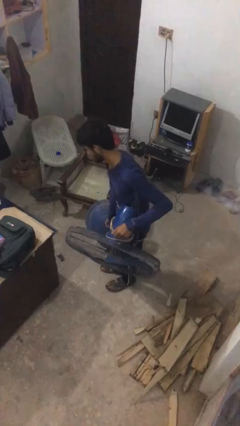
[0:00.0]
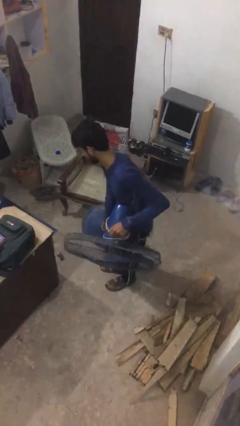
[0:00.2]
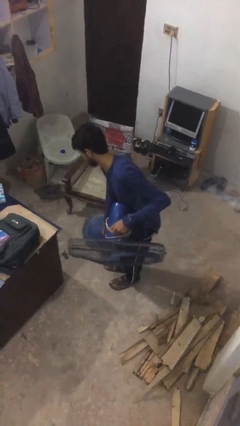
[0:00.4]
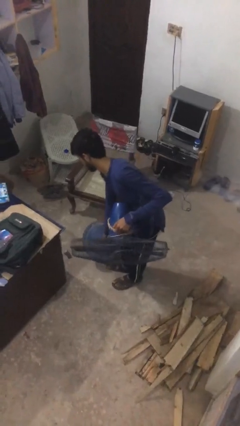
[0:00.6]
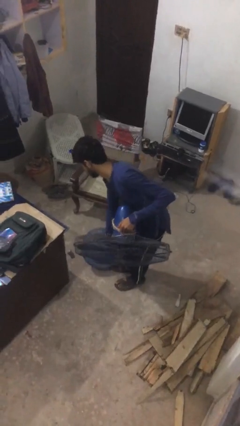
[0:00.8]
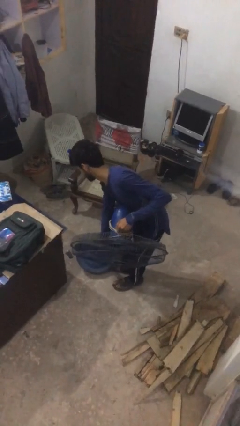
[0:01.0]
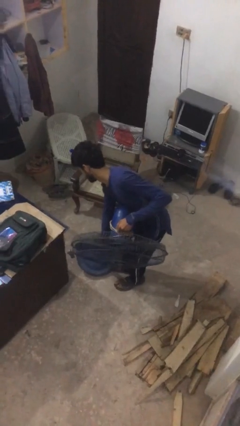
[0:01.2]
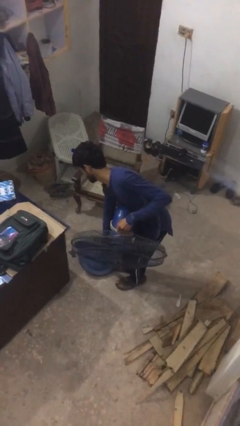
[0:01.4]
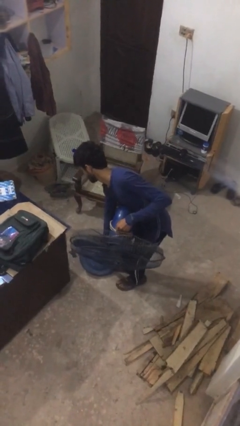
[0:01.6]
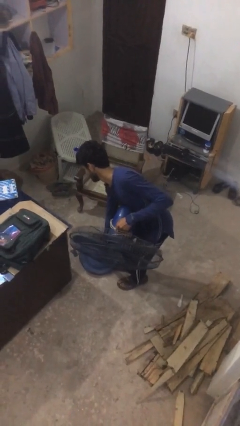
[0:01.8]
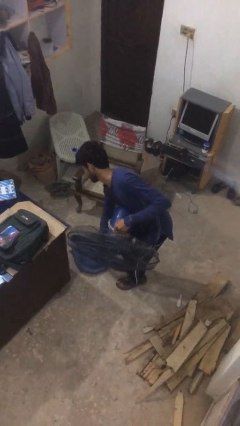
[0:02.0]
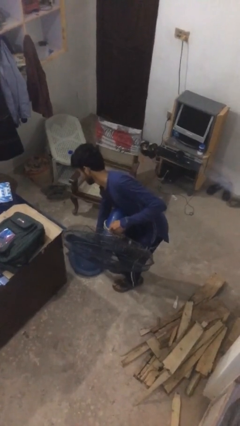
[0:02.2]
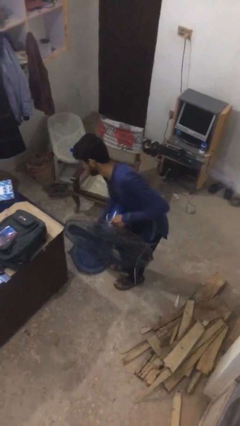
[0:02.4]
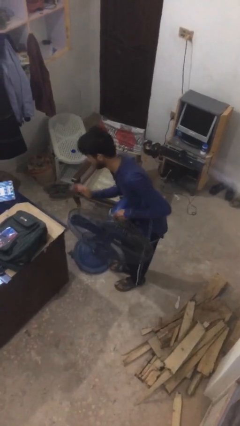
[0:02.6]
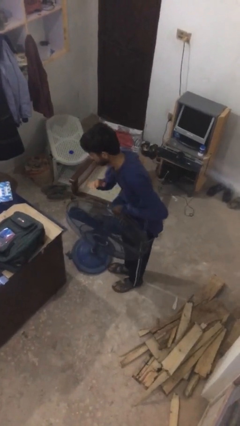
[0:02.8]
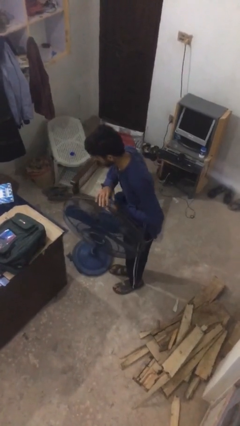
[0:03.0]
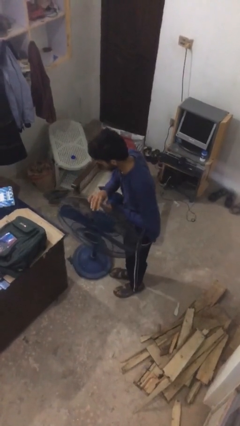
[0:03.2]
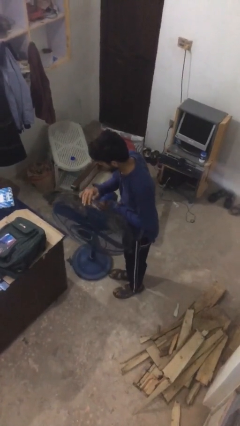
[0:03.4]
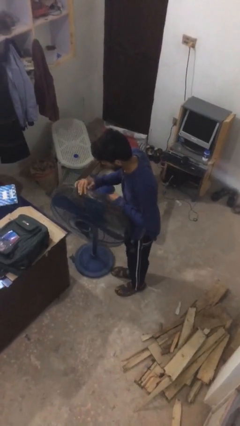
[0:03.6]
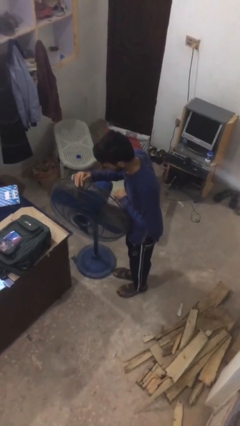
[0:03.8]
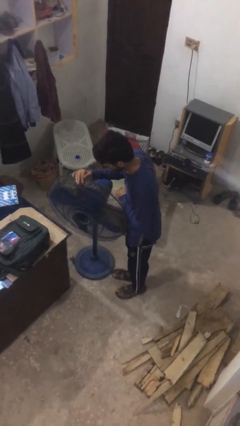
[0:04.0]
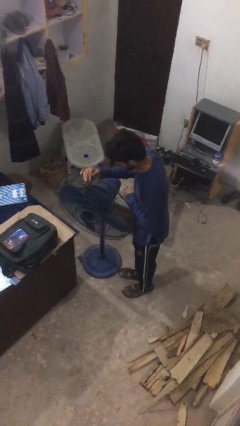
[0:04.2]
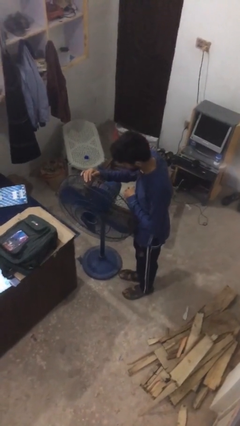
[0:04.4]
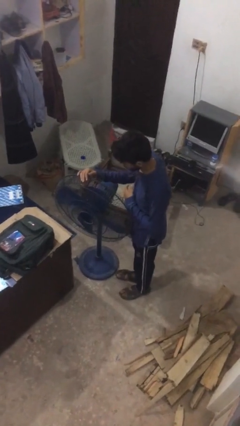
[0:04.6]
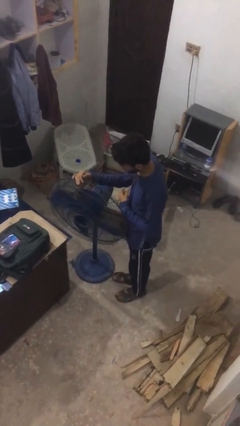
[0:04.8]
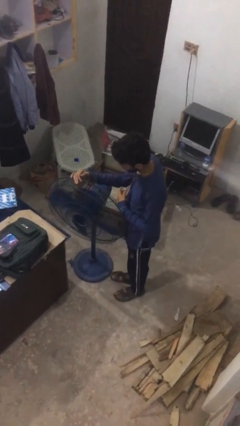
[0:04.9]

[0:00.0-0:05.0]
person puts down object on floor

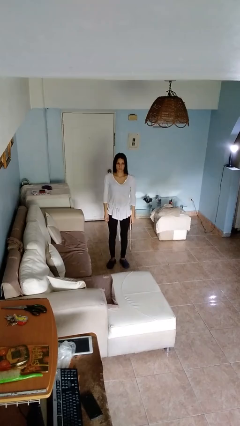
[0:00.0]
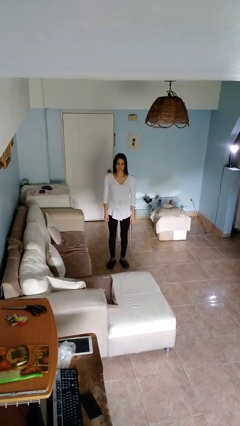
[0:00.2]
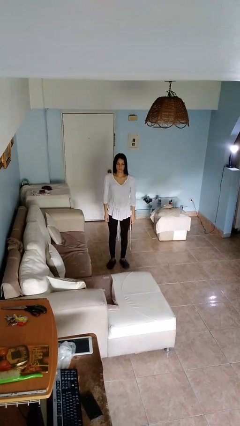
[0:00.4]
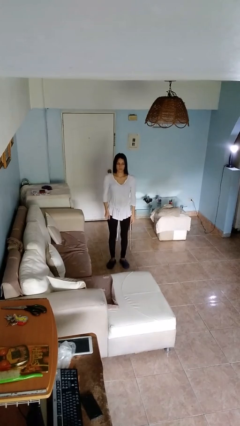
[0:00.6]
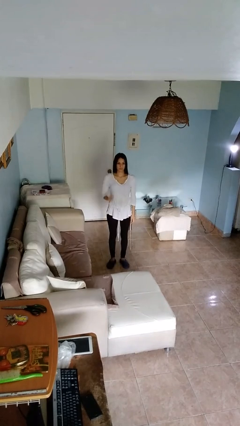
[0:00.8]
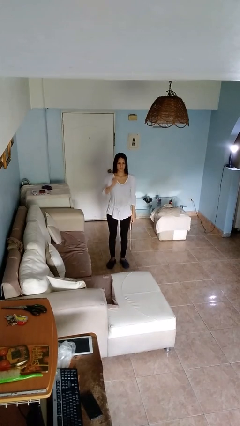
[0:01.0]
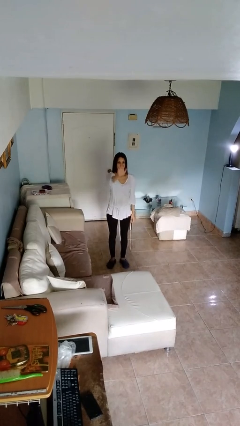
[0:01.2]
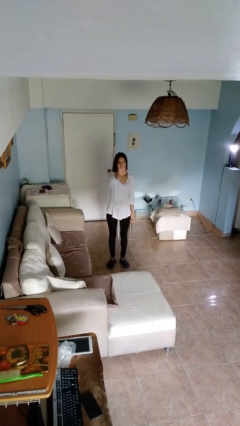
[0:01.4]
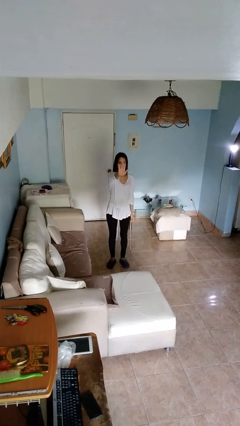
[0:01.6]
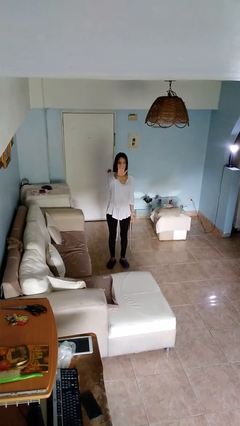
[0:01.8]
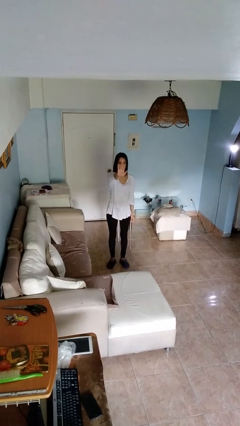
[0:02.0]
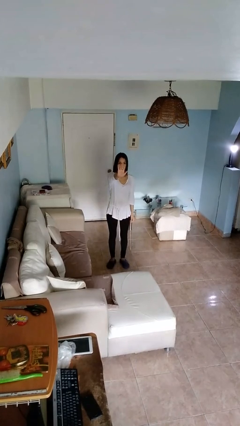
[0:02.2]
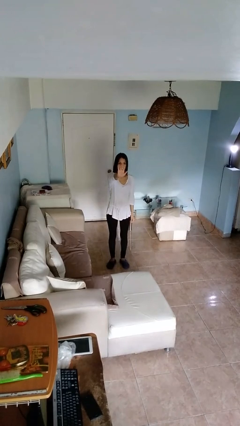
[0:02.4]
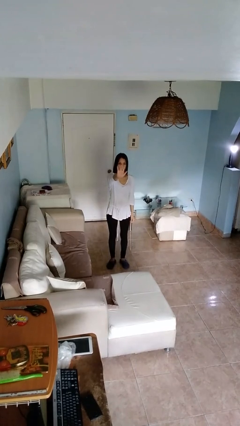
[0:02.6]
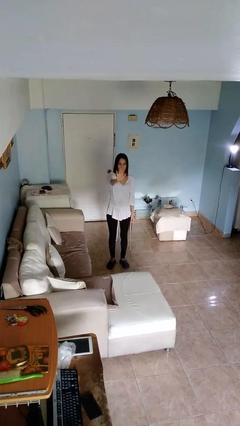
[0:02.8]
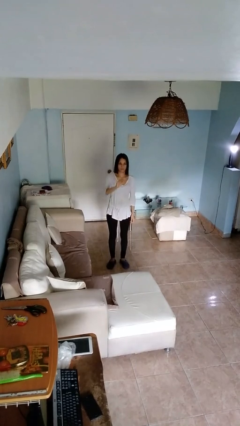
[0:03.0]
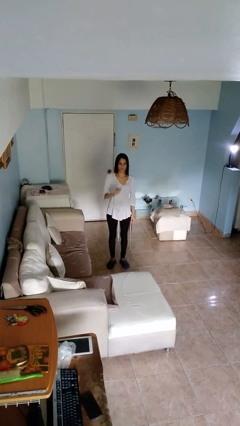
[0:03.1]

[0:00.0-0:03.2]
person gestures stop

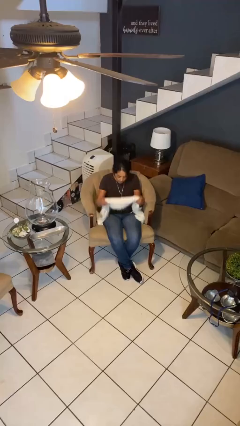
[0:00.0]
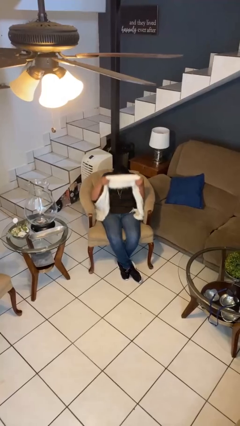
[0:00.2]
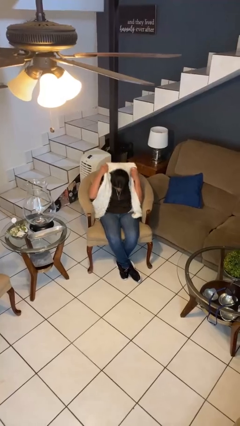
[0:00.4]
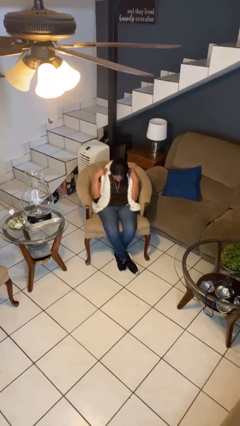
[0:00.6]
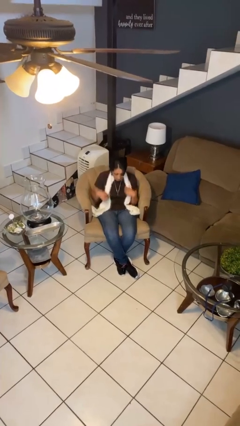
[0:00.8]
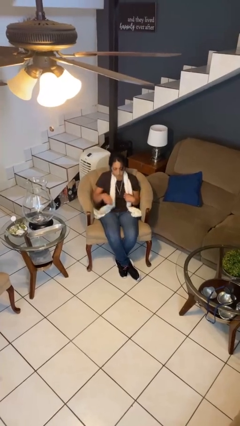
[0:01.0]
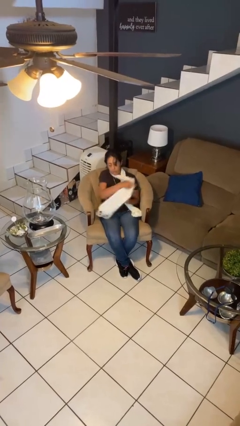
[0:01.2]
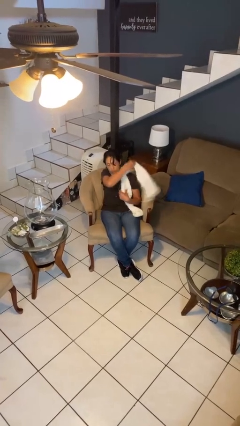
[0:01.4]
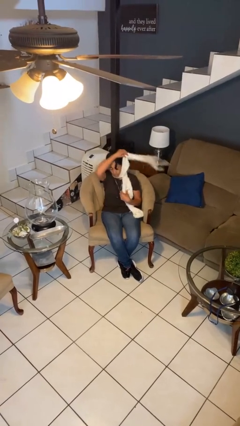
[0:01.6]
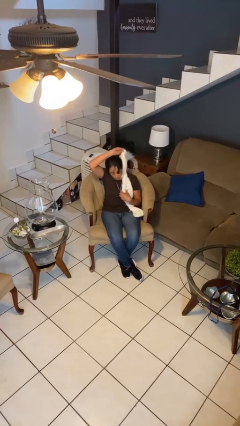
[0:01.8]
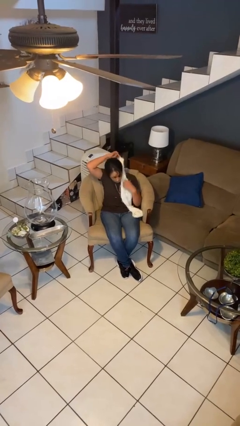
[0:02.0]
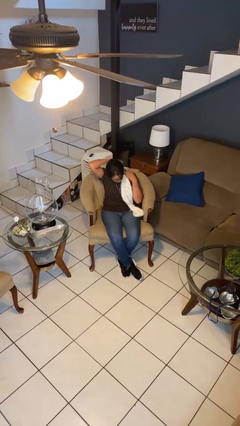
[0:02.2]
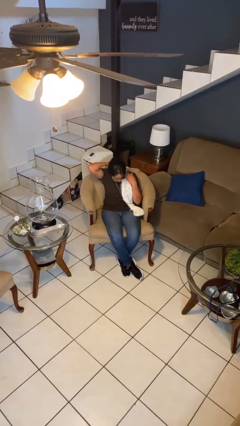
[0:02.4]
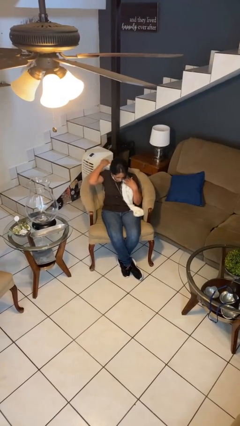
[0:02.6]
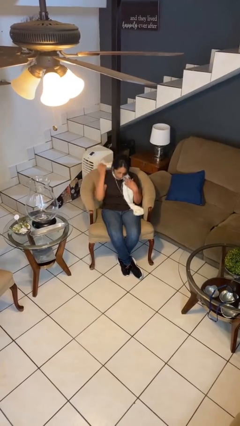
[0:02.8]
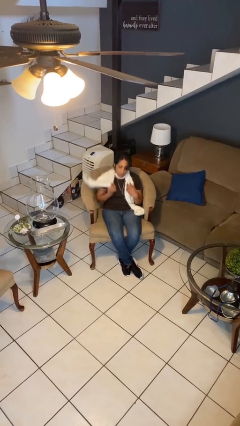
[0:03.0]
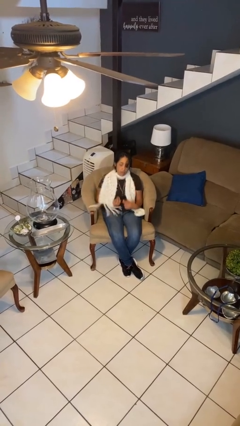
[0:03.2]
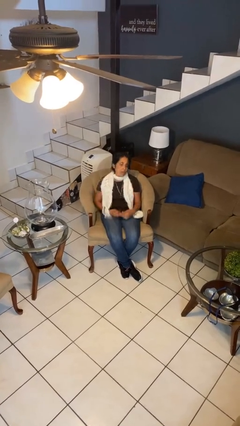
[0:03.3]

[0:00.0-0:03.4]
person puts on scarf

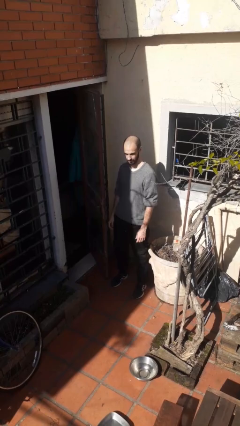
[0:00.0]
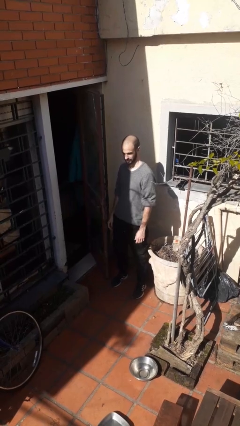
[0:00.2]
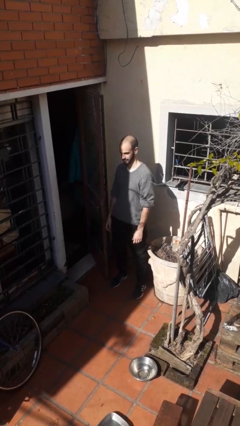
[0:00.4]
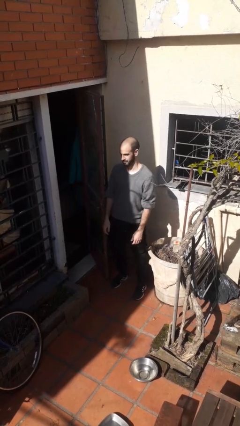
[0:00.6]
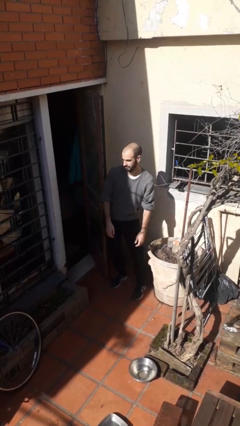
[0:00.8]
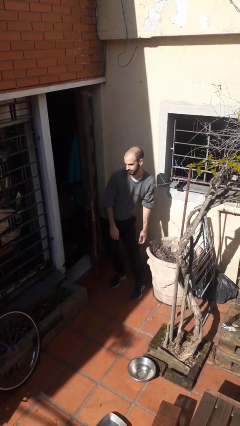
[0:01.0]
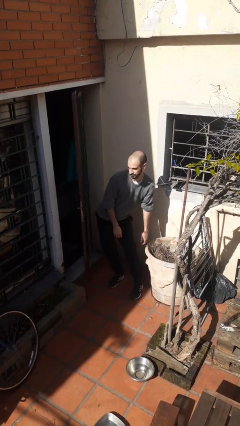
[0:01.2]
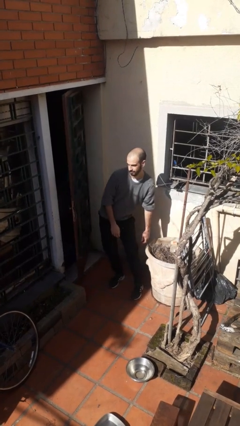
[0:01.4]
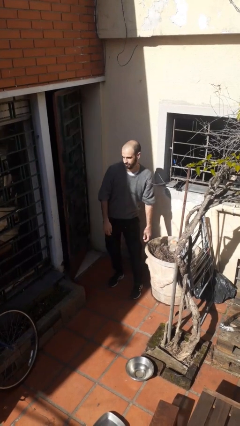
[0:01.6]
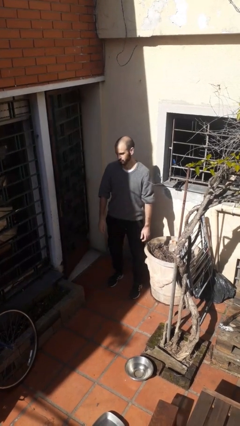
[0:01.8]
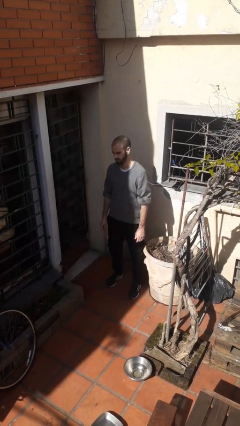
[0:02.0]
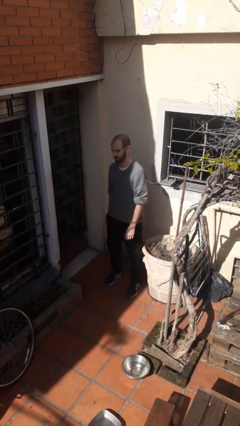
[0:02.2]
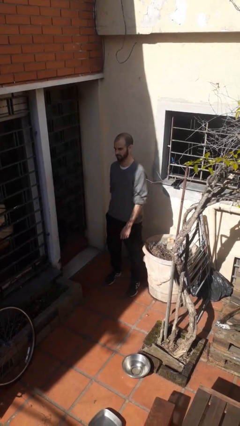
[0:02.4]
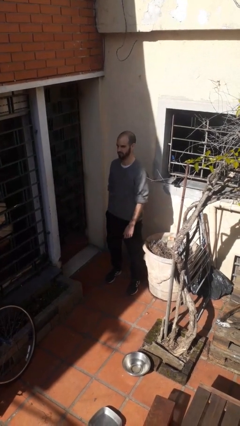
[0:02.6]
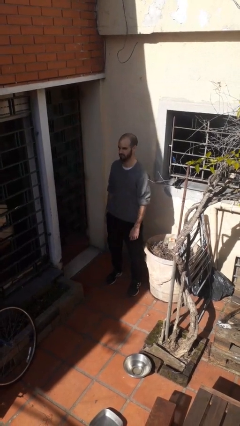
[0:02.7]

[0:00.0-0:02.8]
person closes door with hip

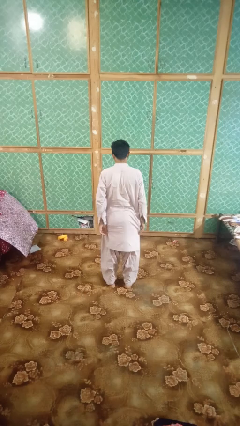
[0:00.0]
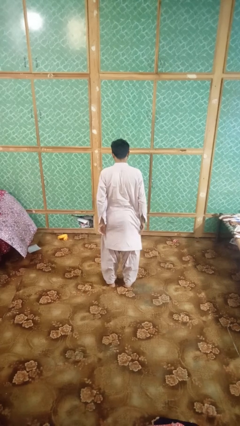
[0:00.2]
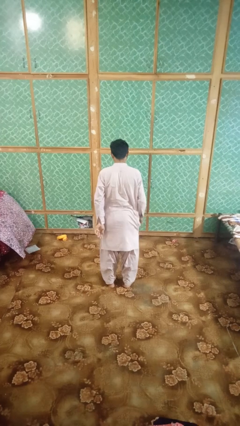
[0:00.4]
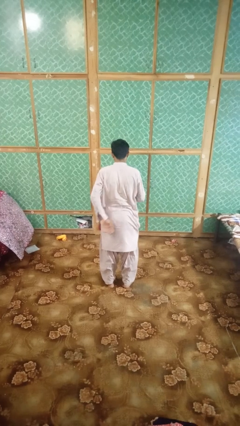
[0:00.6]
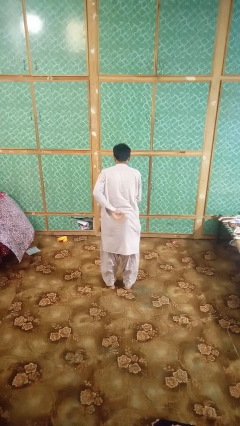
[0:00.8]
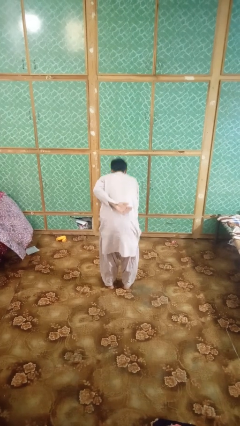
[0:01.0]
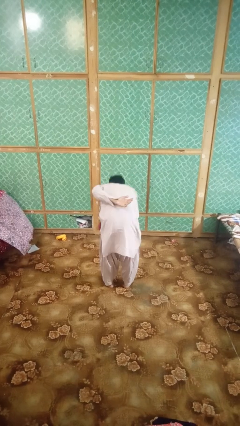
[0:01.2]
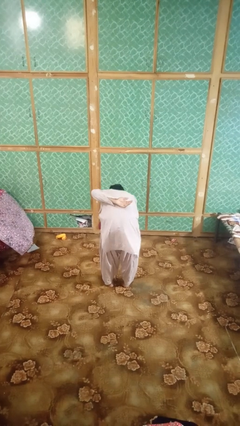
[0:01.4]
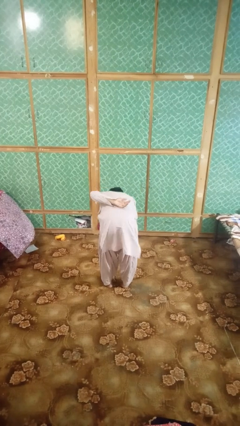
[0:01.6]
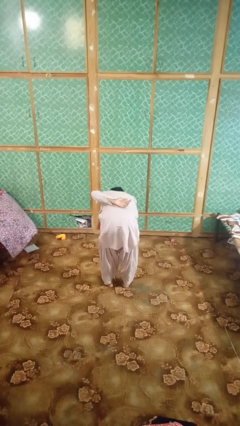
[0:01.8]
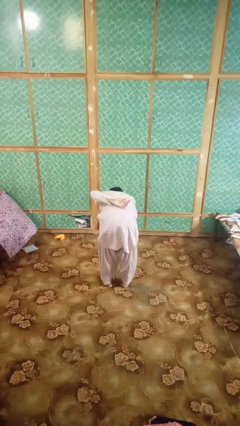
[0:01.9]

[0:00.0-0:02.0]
person bows

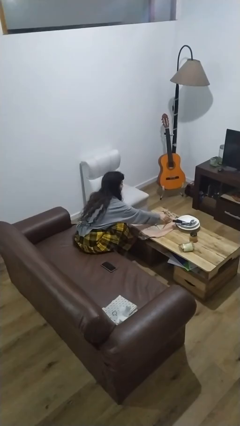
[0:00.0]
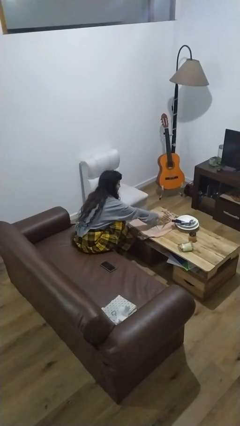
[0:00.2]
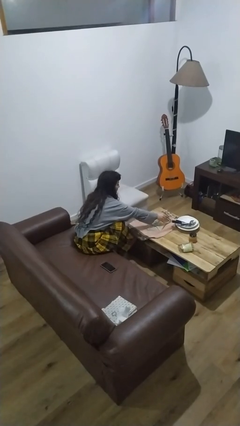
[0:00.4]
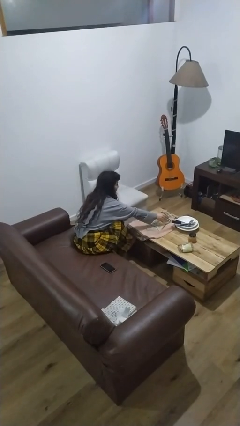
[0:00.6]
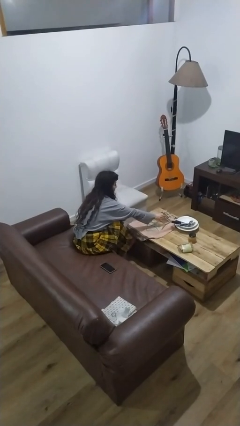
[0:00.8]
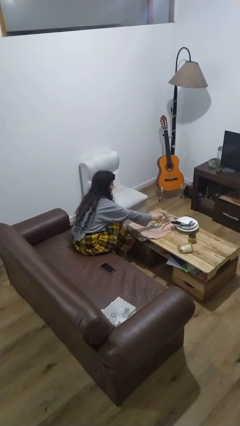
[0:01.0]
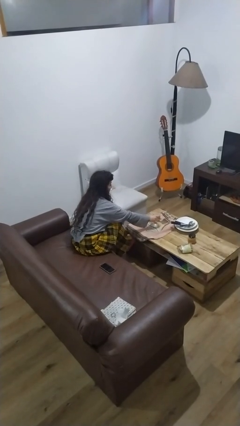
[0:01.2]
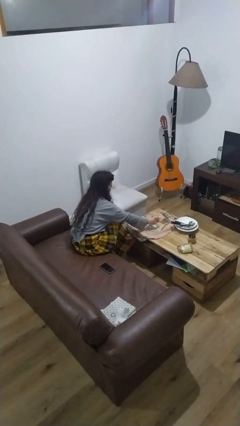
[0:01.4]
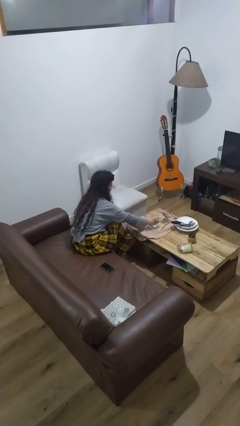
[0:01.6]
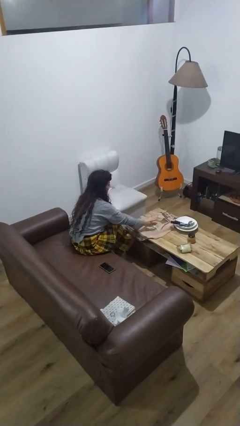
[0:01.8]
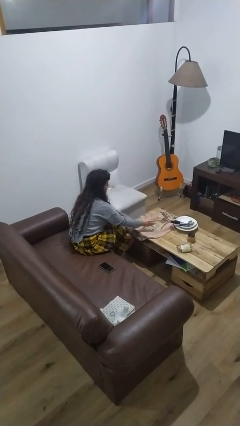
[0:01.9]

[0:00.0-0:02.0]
person sets upright glass
